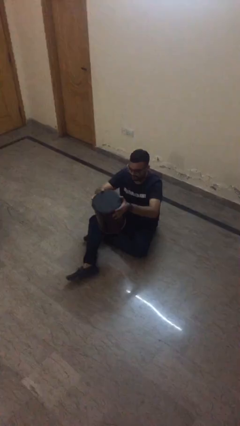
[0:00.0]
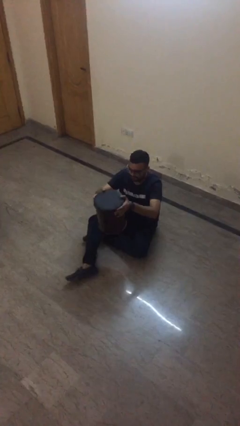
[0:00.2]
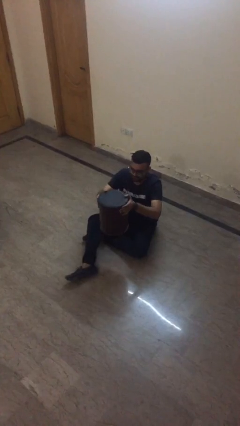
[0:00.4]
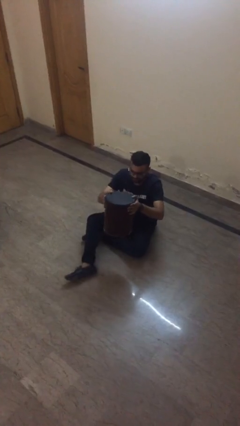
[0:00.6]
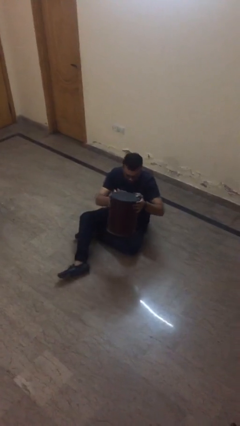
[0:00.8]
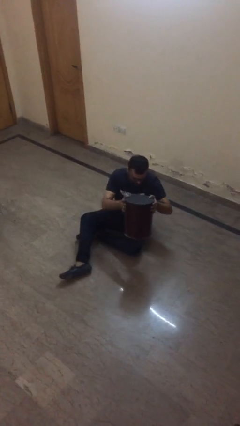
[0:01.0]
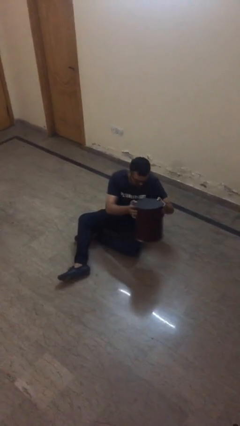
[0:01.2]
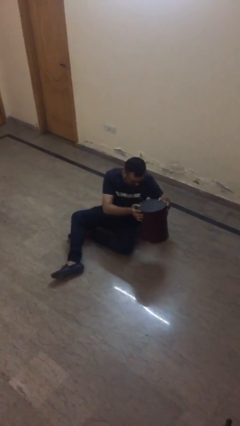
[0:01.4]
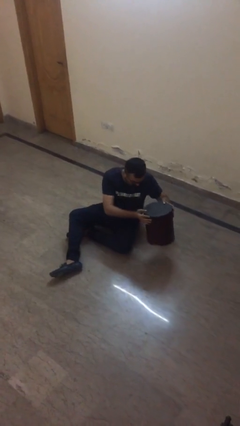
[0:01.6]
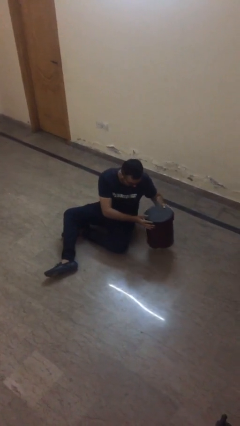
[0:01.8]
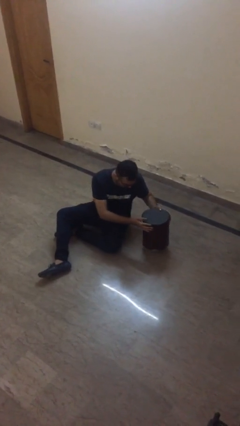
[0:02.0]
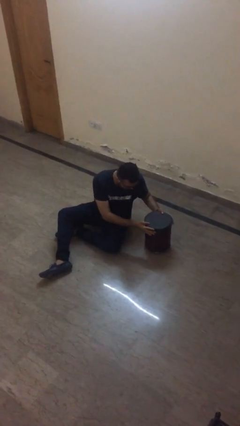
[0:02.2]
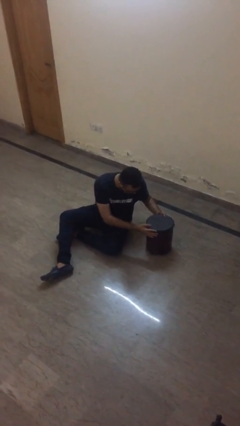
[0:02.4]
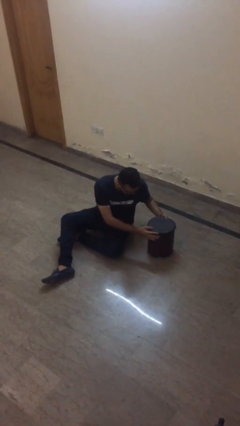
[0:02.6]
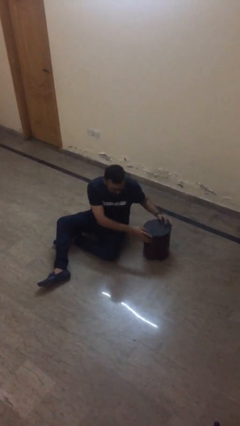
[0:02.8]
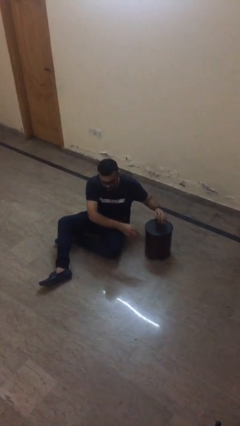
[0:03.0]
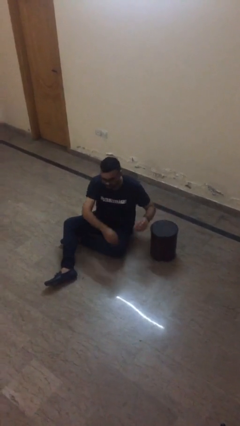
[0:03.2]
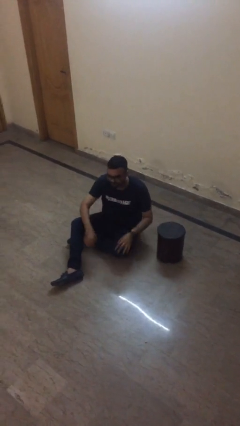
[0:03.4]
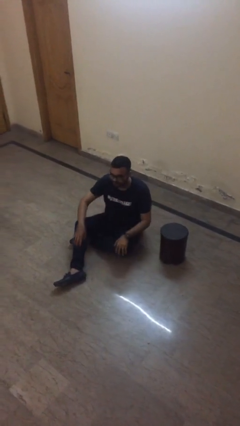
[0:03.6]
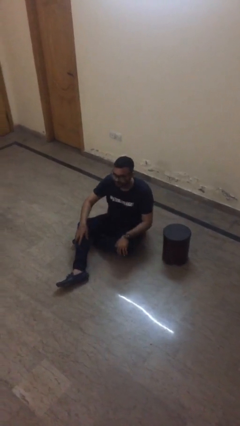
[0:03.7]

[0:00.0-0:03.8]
person puts down object on floor

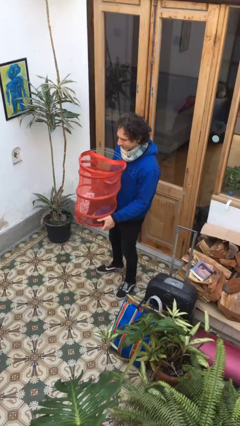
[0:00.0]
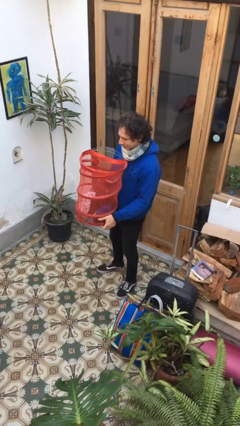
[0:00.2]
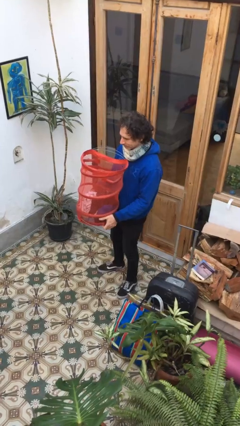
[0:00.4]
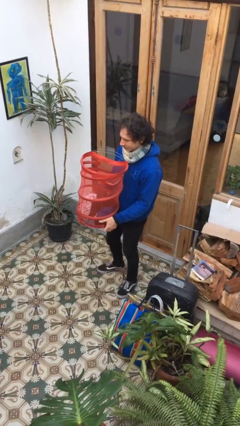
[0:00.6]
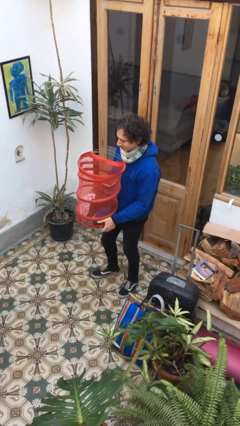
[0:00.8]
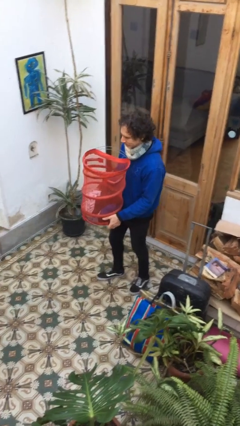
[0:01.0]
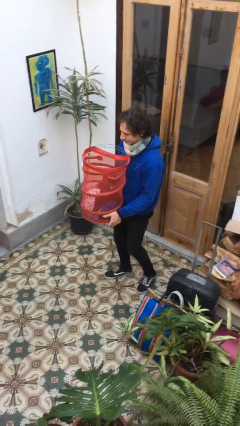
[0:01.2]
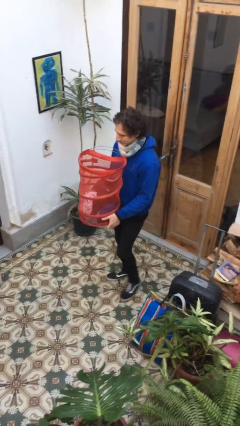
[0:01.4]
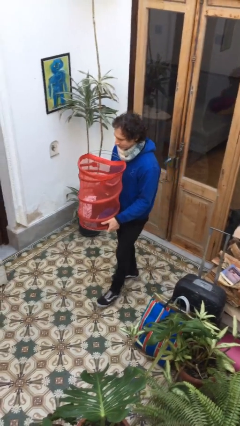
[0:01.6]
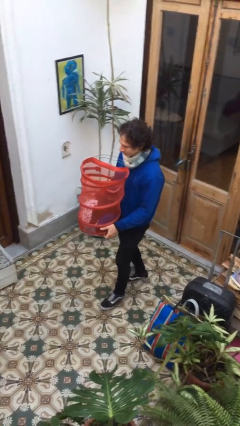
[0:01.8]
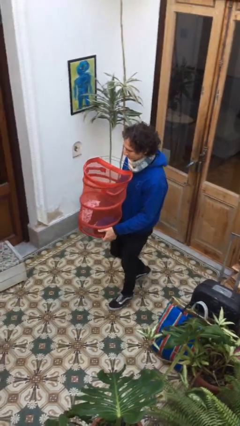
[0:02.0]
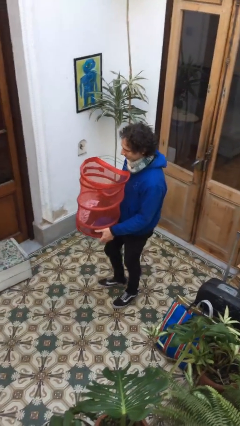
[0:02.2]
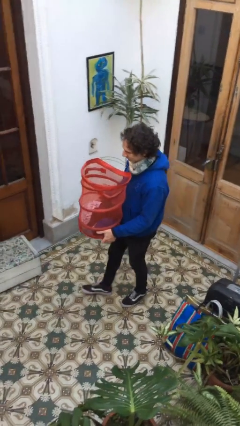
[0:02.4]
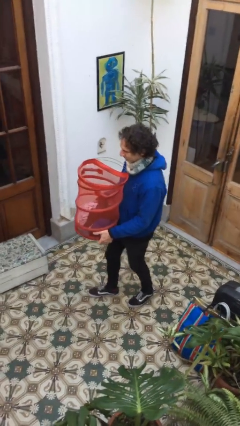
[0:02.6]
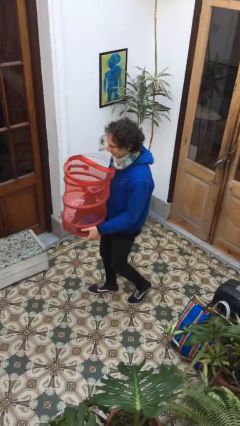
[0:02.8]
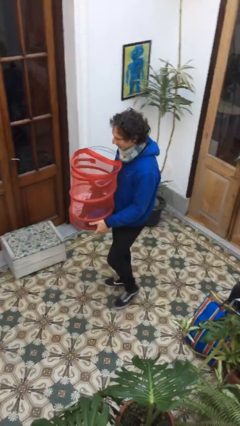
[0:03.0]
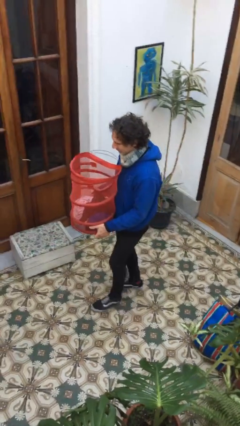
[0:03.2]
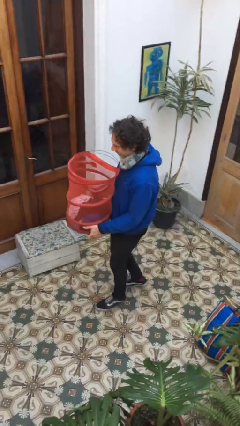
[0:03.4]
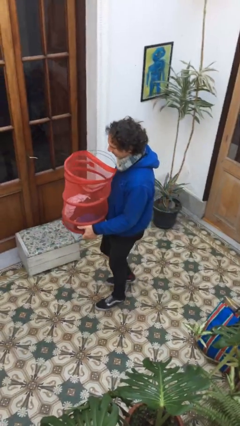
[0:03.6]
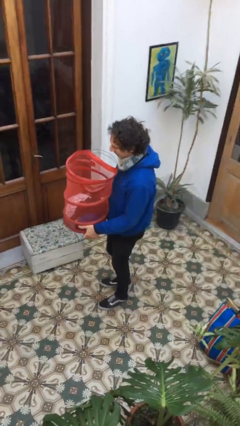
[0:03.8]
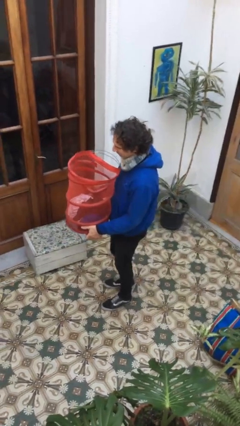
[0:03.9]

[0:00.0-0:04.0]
person carries laundry basket

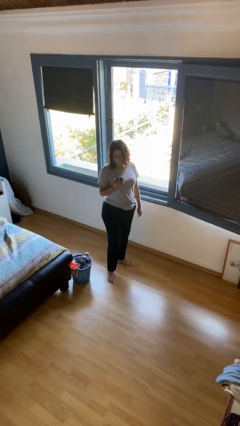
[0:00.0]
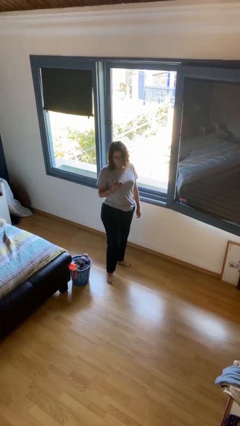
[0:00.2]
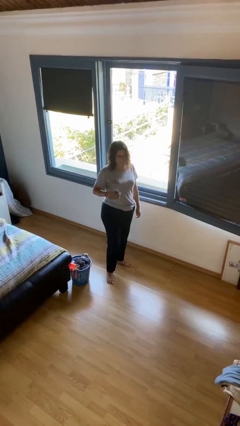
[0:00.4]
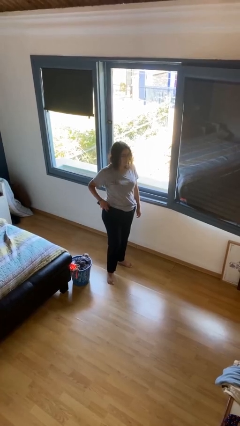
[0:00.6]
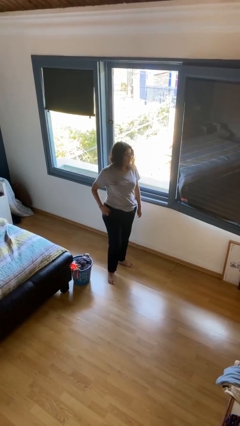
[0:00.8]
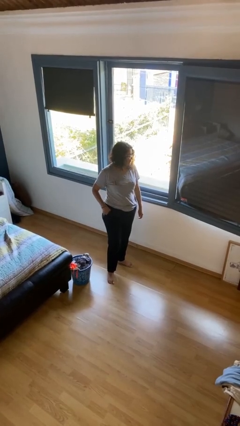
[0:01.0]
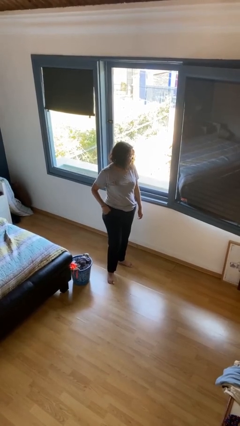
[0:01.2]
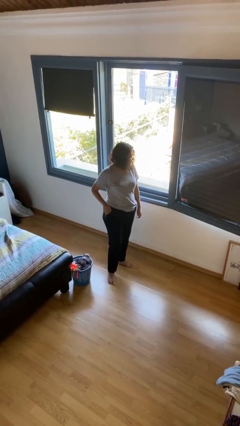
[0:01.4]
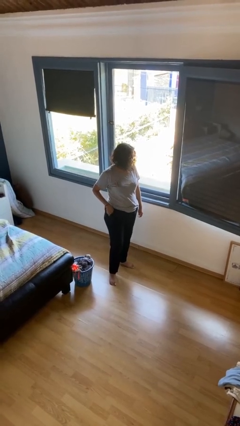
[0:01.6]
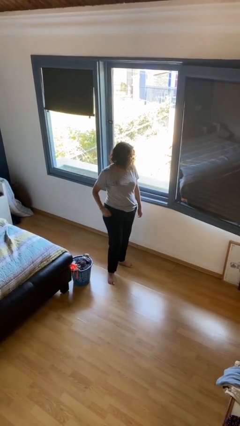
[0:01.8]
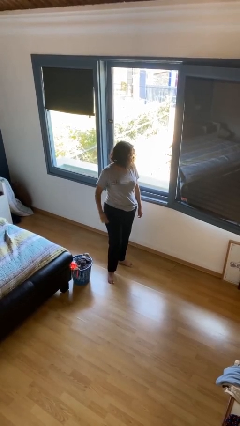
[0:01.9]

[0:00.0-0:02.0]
person puts phone into pocket

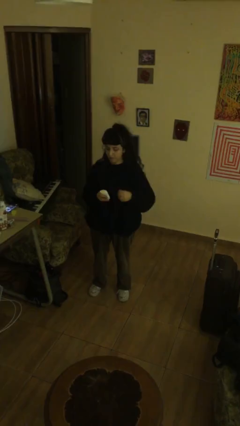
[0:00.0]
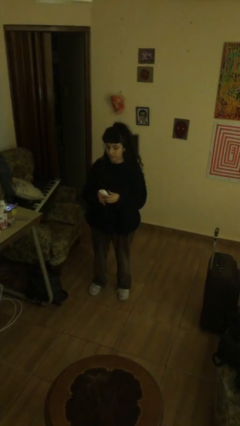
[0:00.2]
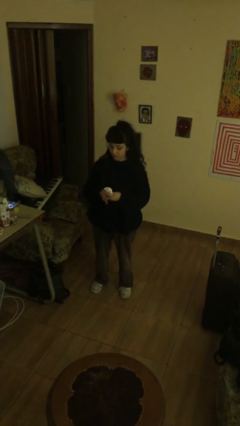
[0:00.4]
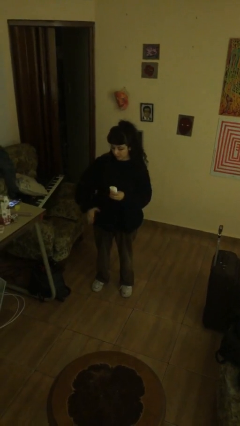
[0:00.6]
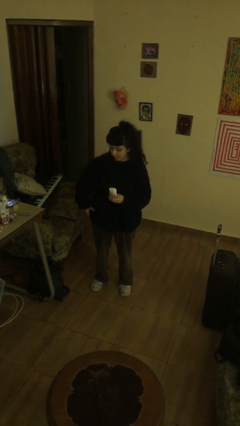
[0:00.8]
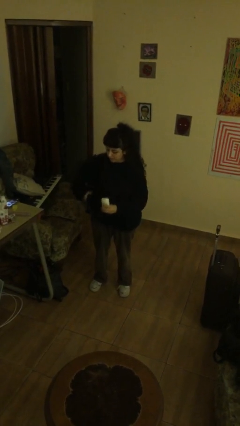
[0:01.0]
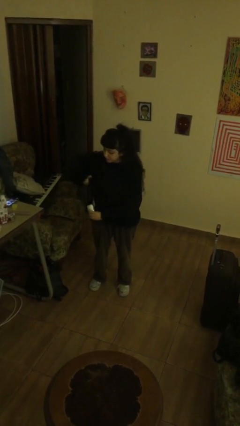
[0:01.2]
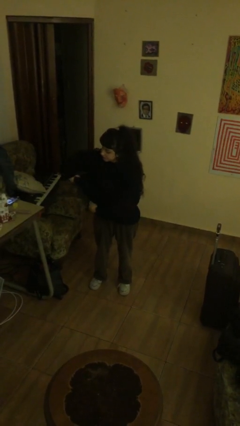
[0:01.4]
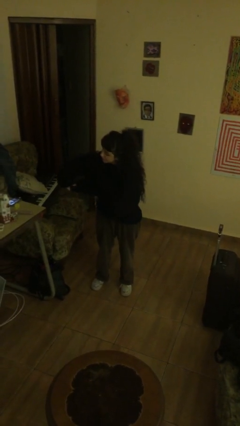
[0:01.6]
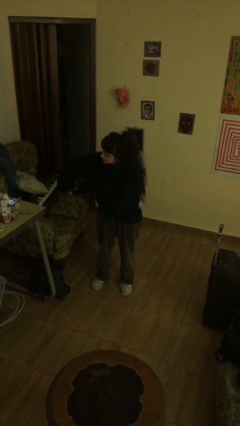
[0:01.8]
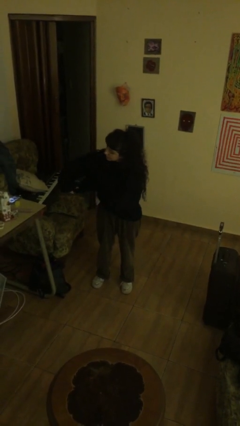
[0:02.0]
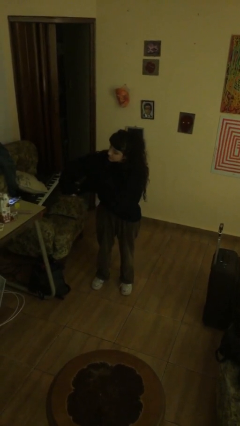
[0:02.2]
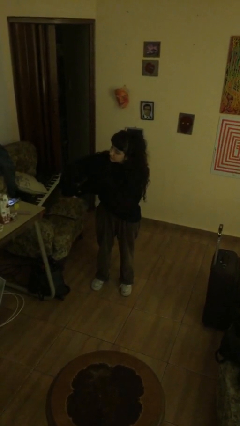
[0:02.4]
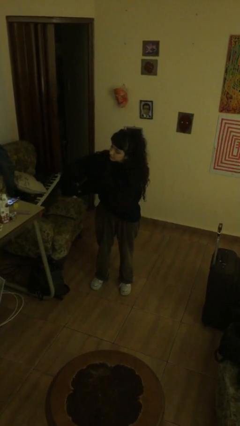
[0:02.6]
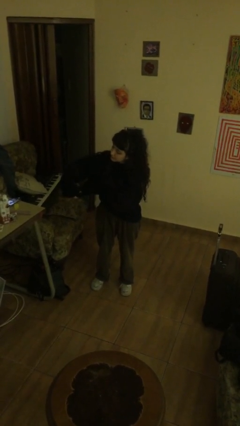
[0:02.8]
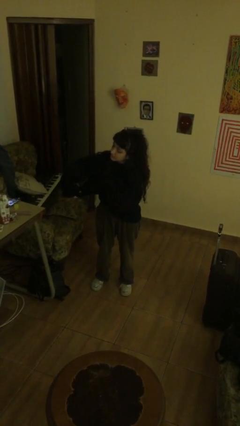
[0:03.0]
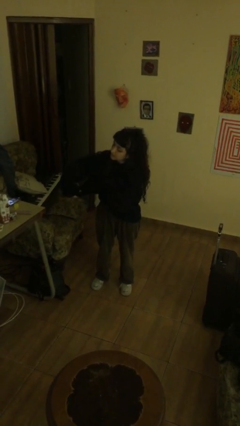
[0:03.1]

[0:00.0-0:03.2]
person applies deodorant

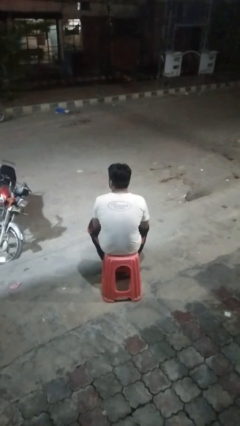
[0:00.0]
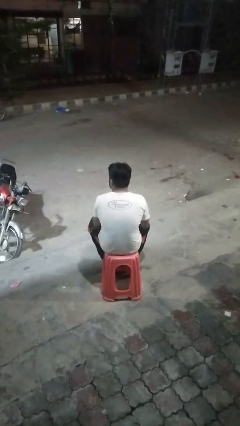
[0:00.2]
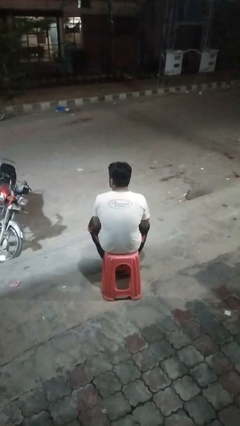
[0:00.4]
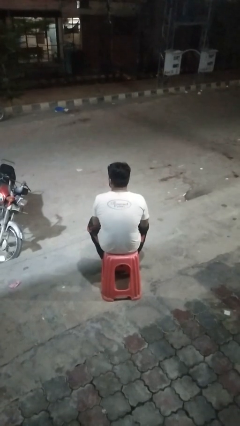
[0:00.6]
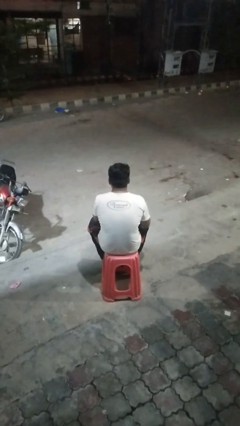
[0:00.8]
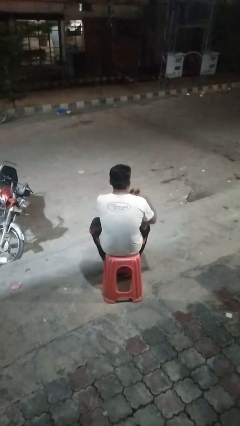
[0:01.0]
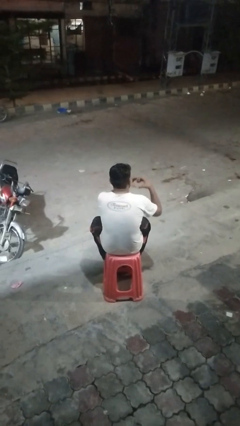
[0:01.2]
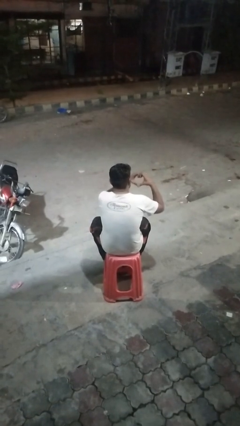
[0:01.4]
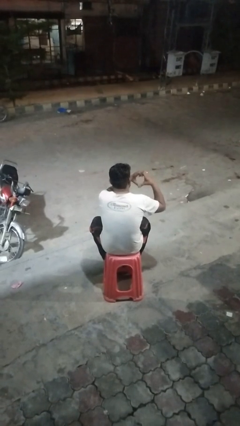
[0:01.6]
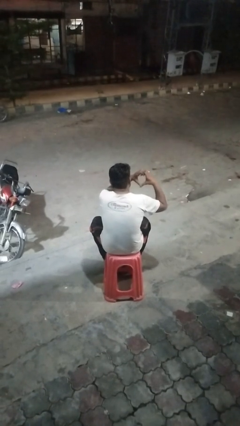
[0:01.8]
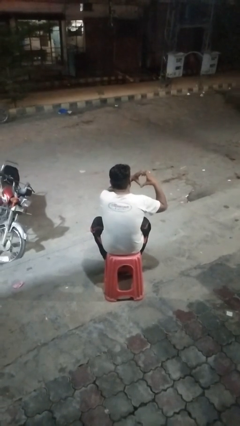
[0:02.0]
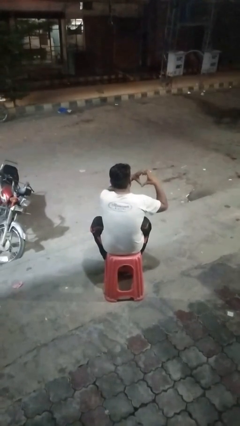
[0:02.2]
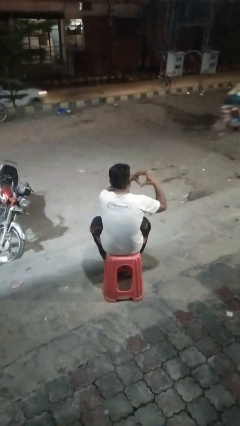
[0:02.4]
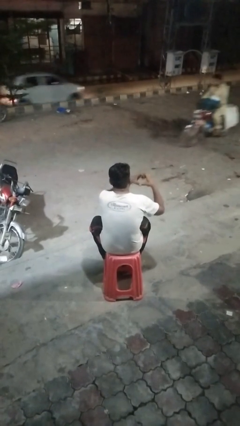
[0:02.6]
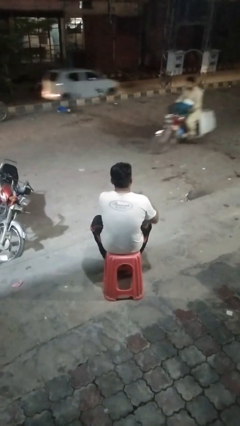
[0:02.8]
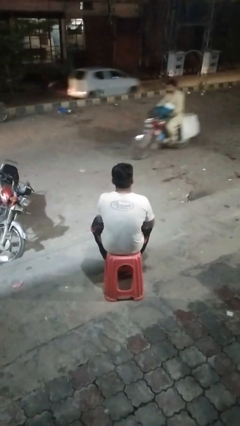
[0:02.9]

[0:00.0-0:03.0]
person gestures heart

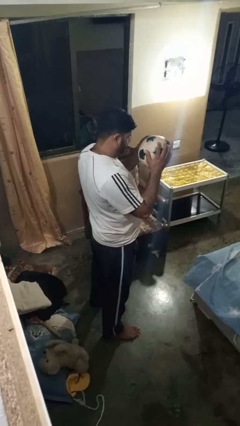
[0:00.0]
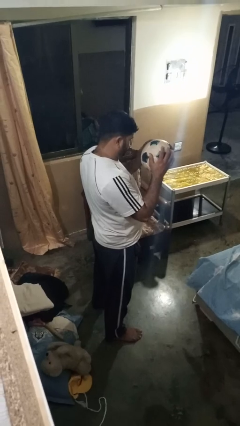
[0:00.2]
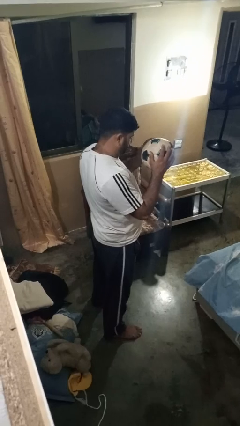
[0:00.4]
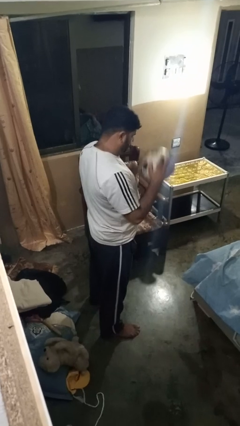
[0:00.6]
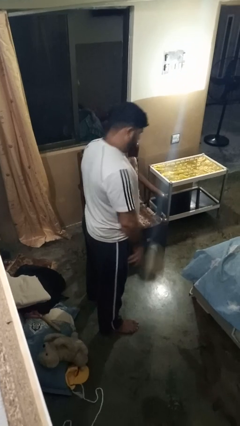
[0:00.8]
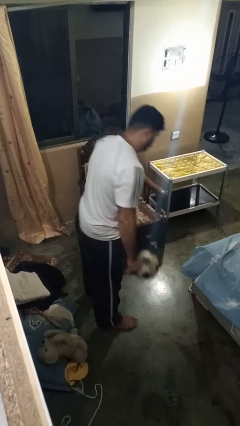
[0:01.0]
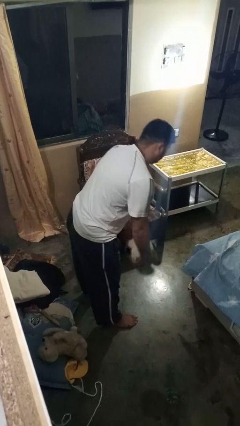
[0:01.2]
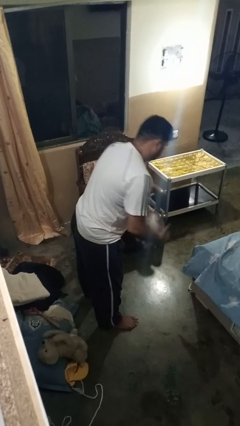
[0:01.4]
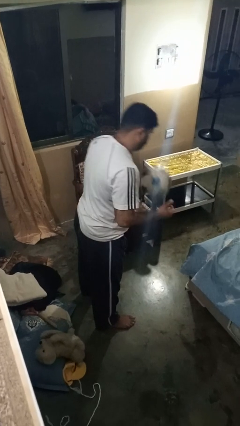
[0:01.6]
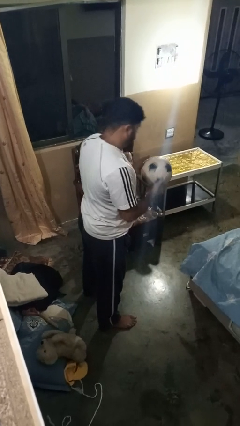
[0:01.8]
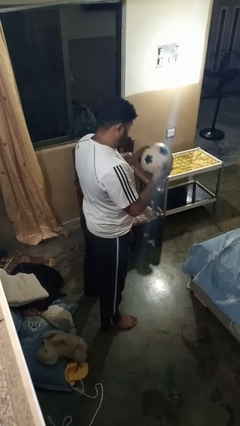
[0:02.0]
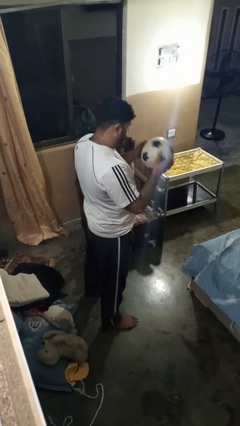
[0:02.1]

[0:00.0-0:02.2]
person bounces ball on floor
